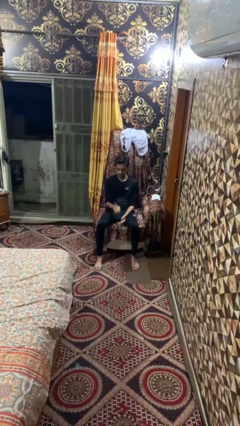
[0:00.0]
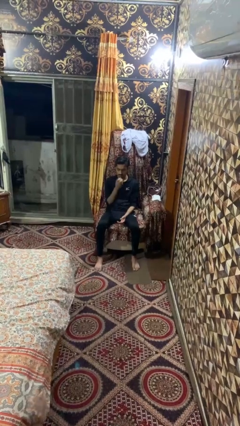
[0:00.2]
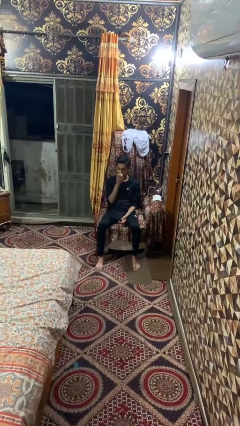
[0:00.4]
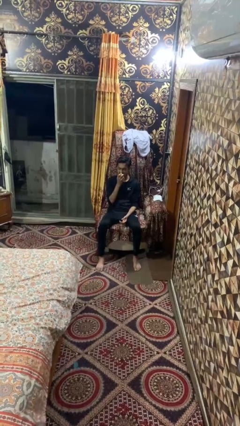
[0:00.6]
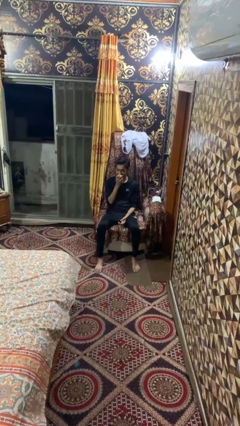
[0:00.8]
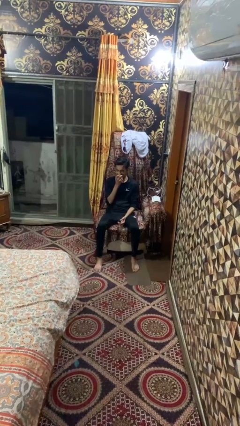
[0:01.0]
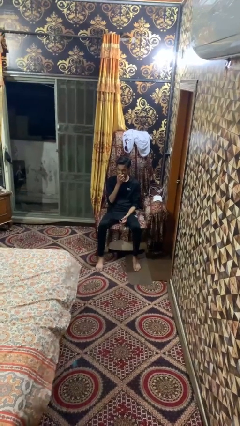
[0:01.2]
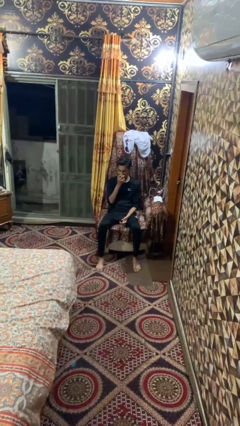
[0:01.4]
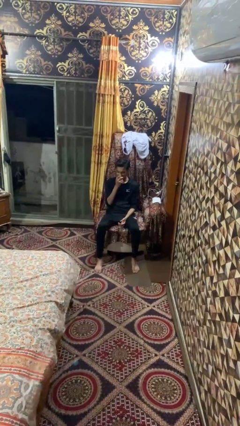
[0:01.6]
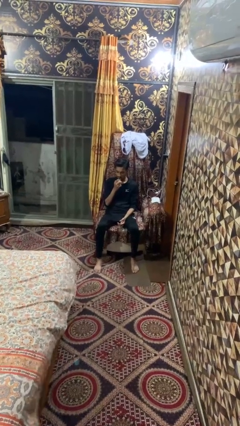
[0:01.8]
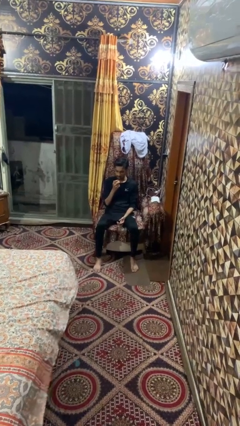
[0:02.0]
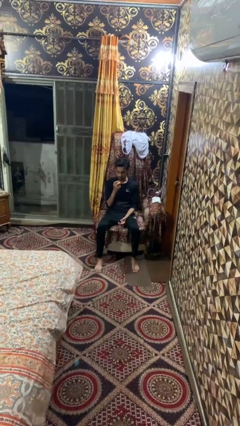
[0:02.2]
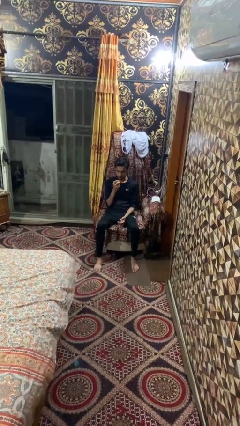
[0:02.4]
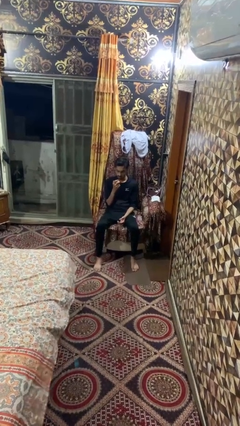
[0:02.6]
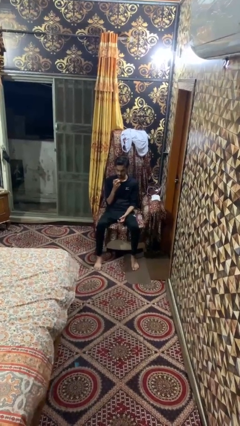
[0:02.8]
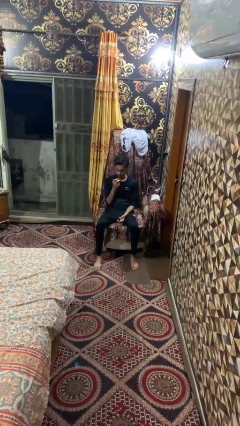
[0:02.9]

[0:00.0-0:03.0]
person eats apple

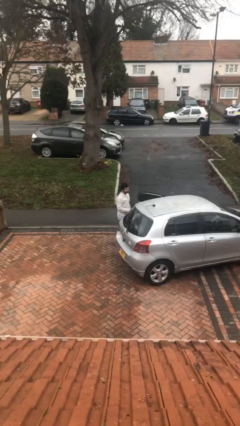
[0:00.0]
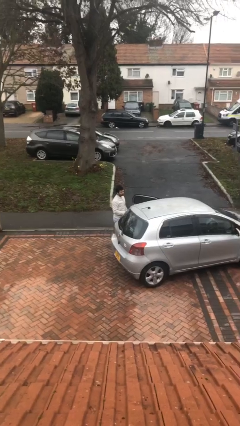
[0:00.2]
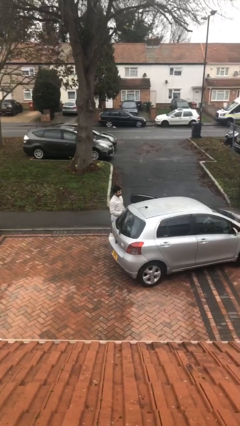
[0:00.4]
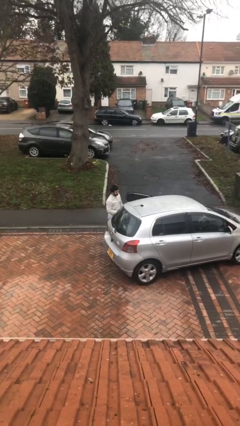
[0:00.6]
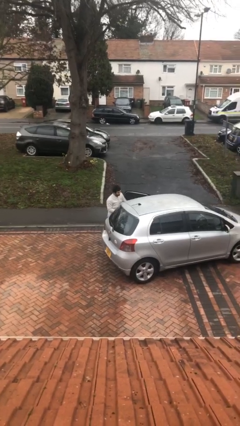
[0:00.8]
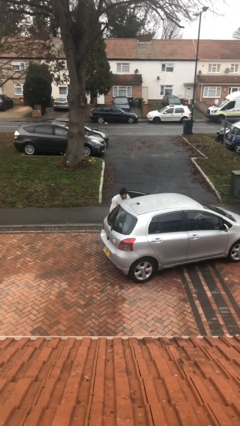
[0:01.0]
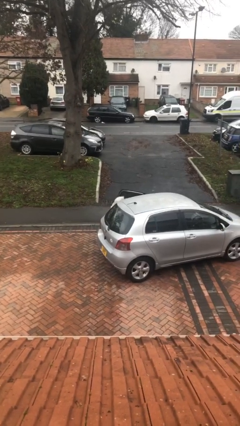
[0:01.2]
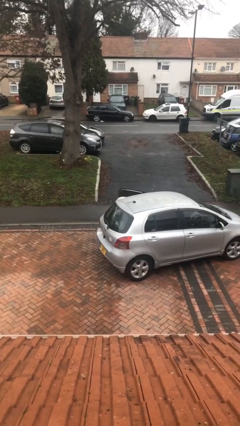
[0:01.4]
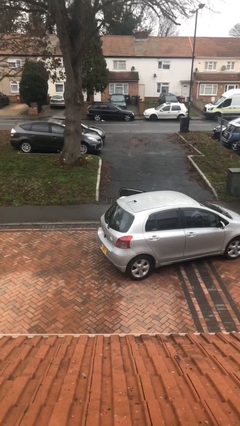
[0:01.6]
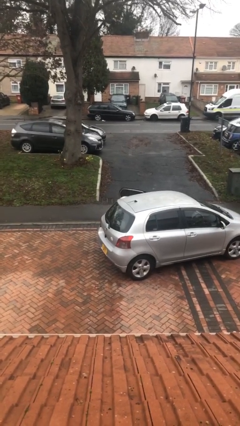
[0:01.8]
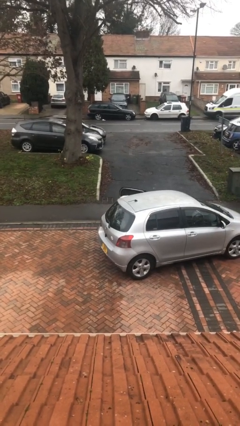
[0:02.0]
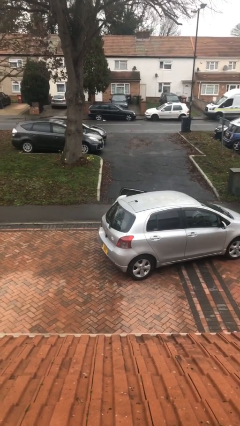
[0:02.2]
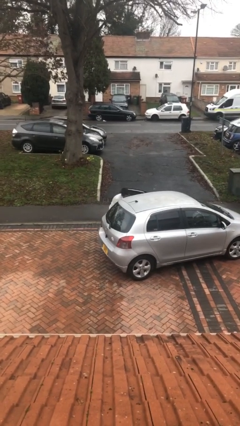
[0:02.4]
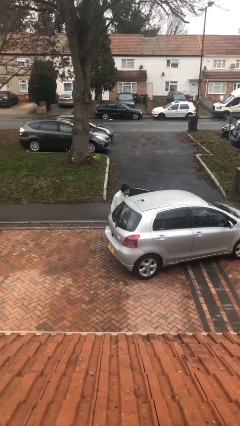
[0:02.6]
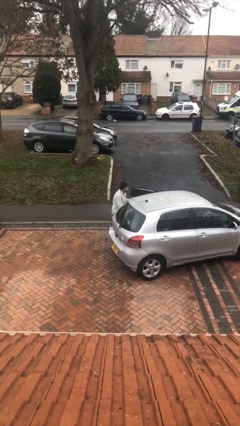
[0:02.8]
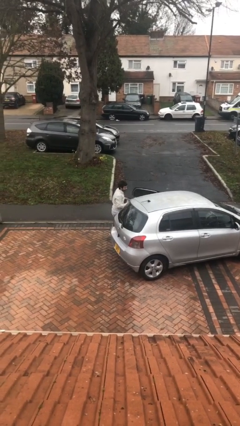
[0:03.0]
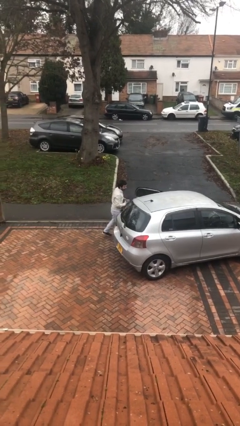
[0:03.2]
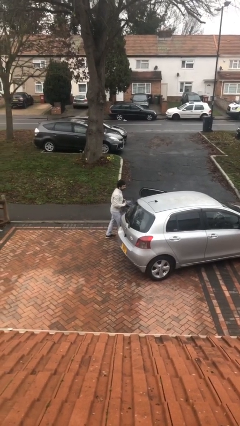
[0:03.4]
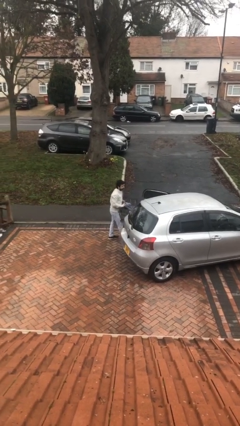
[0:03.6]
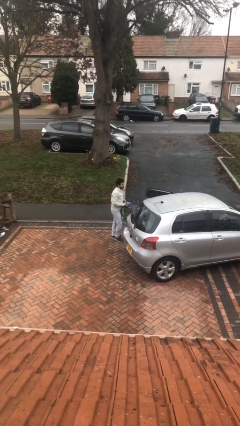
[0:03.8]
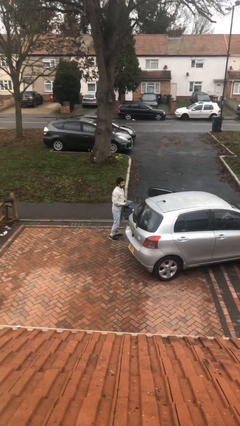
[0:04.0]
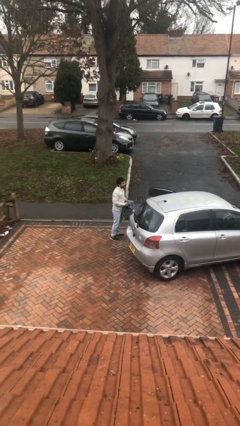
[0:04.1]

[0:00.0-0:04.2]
person unloads car

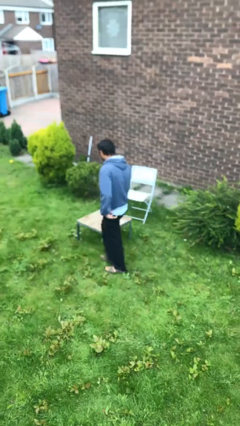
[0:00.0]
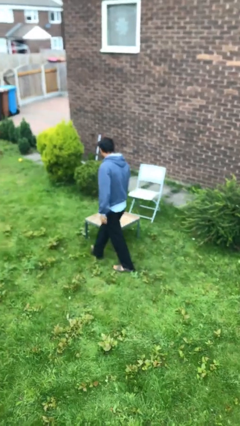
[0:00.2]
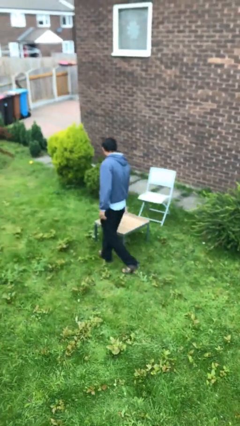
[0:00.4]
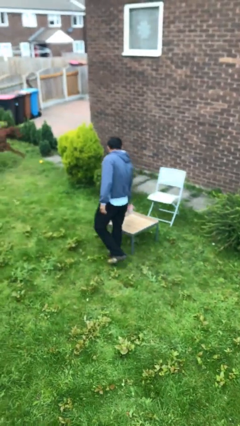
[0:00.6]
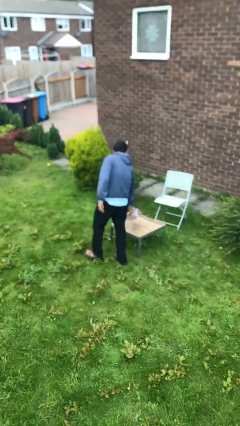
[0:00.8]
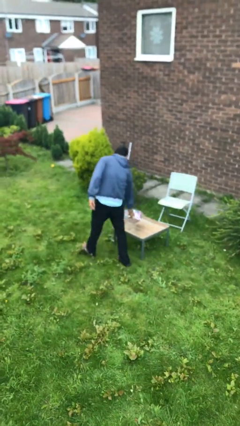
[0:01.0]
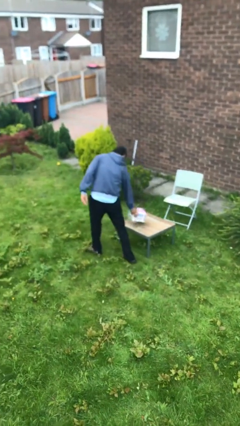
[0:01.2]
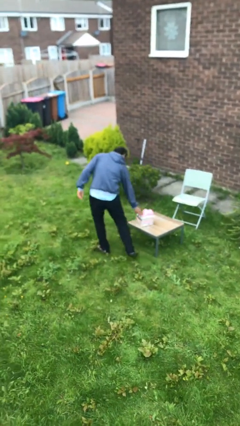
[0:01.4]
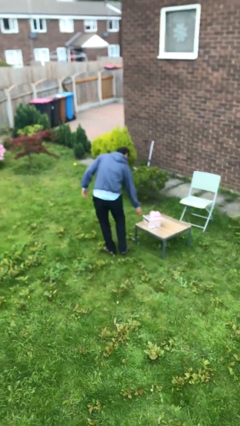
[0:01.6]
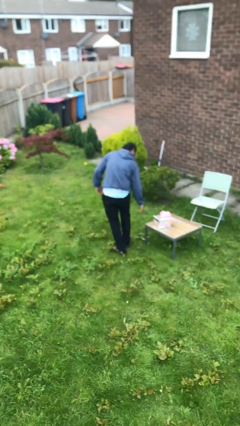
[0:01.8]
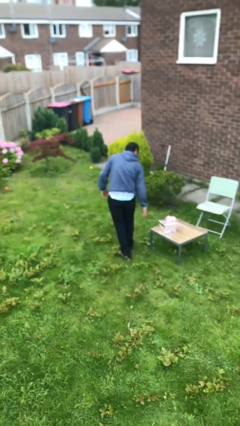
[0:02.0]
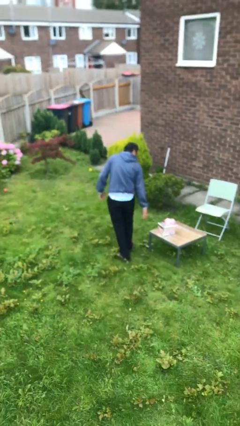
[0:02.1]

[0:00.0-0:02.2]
person puts down object on table

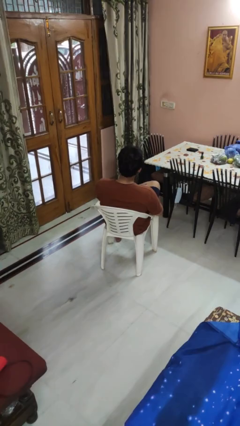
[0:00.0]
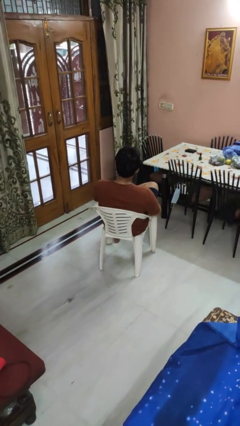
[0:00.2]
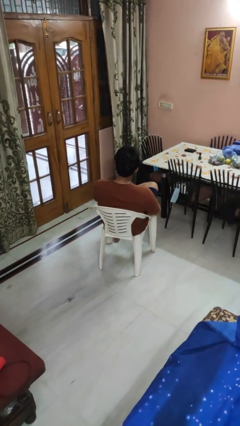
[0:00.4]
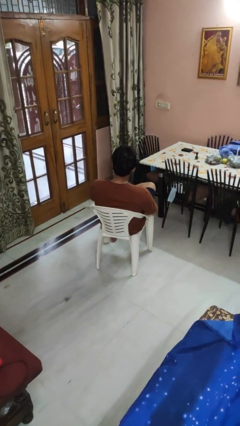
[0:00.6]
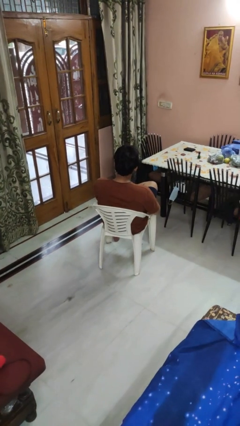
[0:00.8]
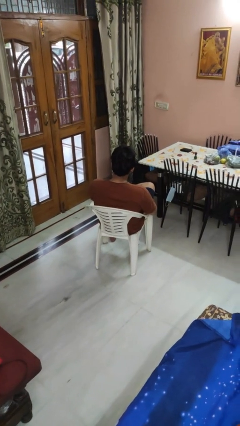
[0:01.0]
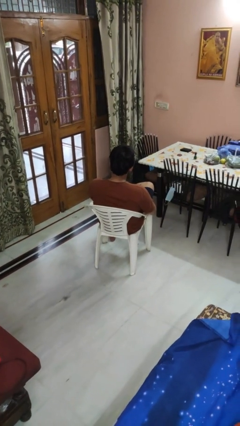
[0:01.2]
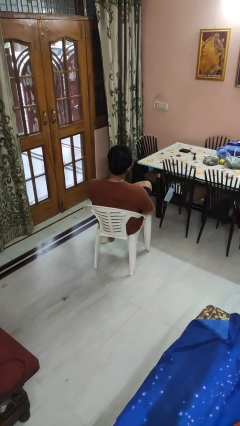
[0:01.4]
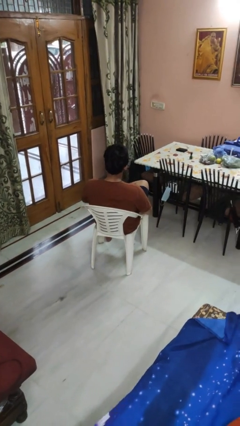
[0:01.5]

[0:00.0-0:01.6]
person rubs foot

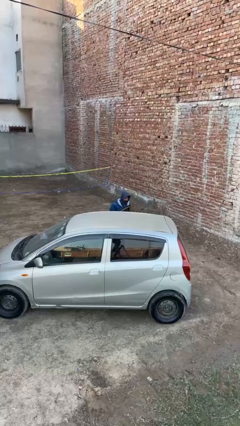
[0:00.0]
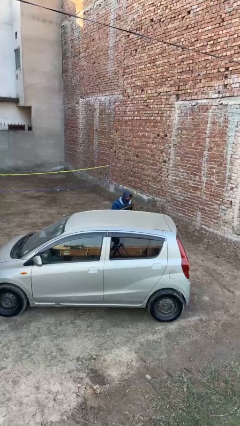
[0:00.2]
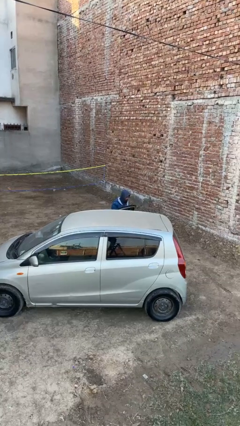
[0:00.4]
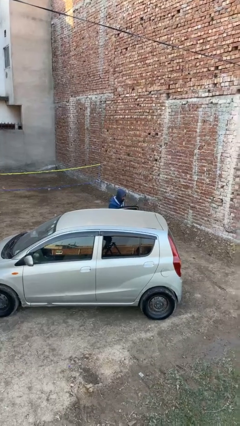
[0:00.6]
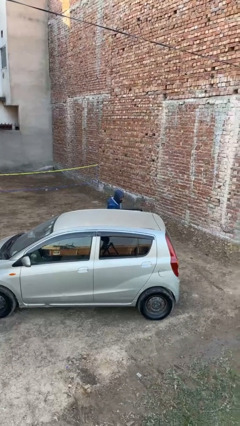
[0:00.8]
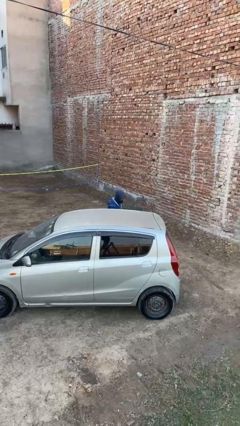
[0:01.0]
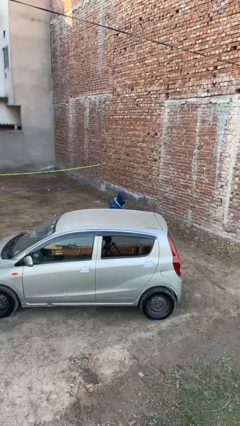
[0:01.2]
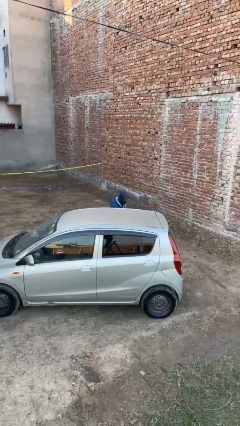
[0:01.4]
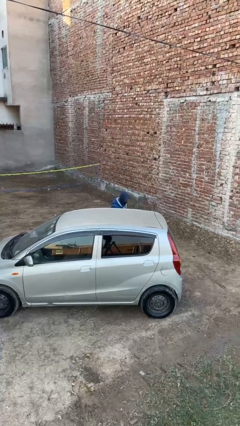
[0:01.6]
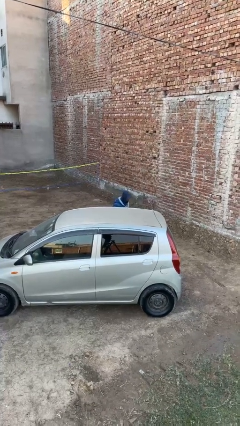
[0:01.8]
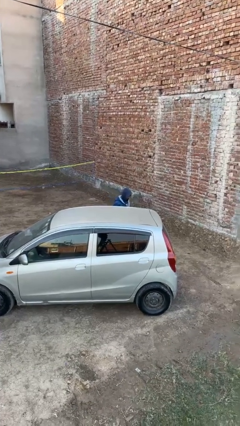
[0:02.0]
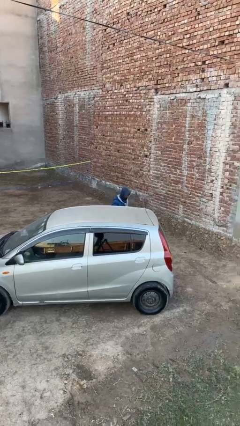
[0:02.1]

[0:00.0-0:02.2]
person closes car door

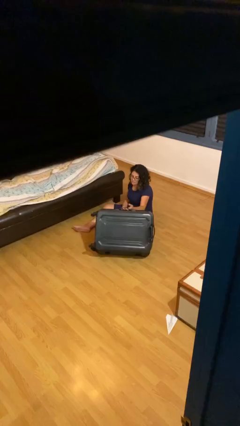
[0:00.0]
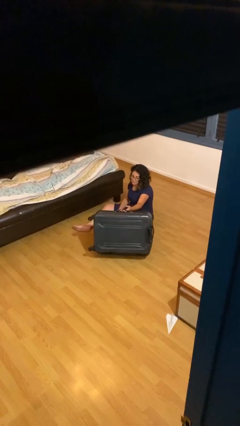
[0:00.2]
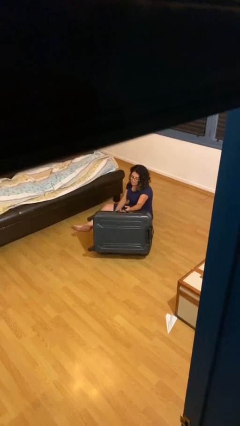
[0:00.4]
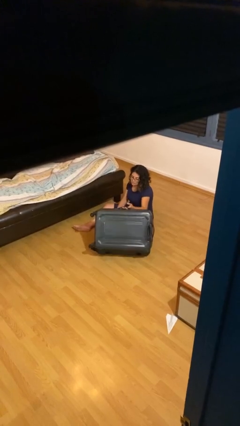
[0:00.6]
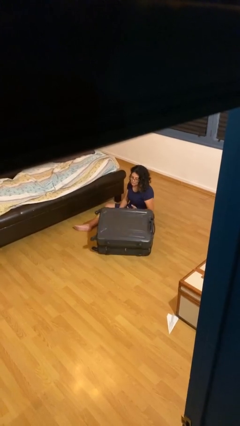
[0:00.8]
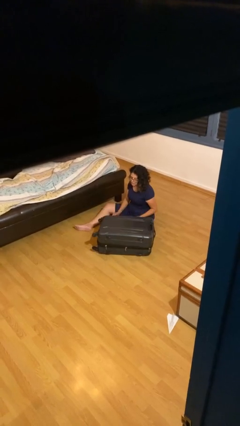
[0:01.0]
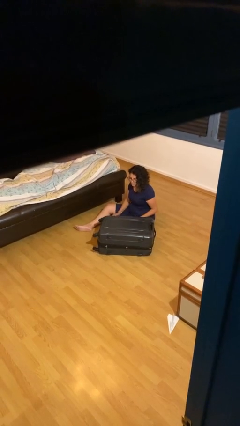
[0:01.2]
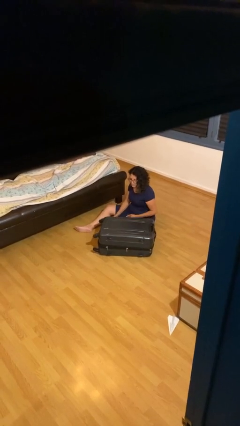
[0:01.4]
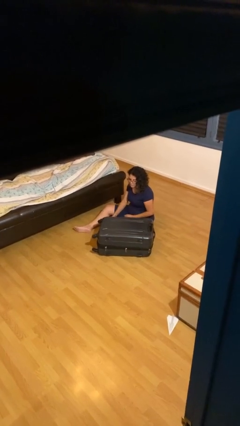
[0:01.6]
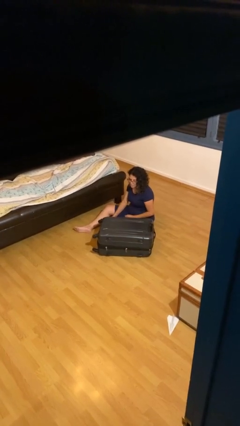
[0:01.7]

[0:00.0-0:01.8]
person closes suitcase

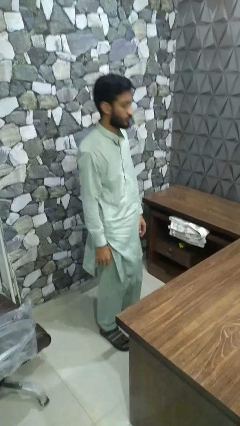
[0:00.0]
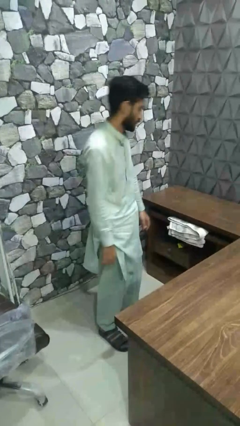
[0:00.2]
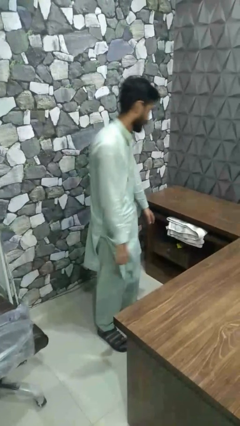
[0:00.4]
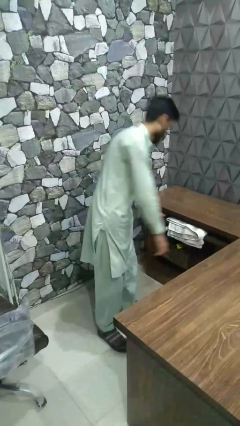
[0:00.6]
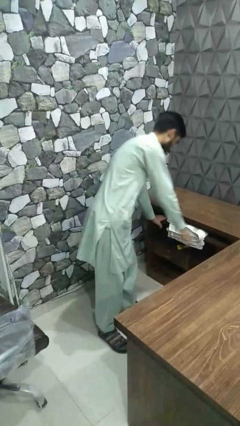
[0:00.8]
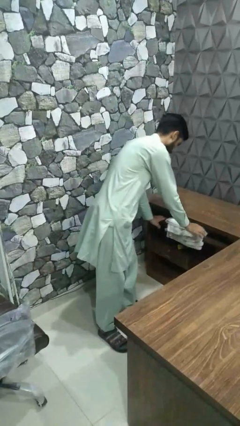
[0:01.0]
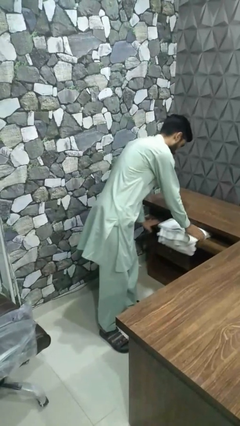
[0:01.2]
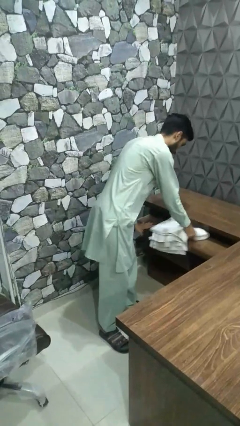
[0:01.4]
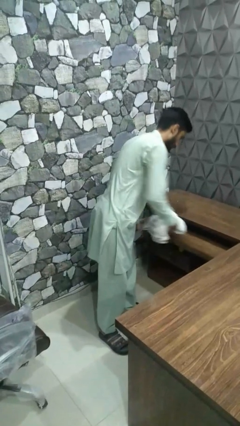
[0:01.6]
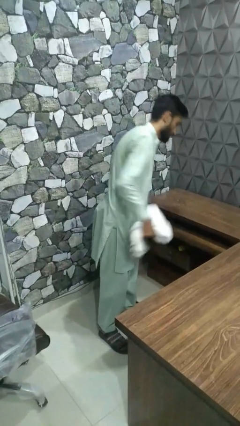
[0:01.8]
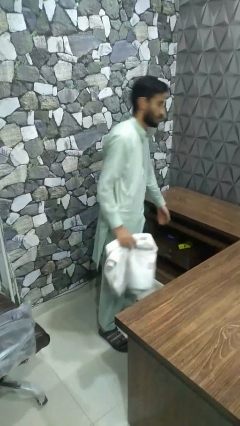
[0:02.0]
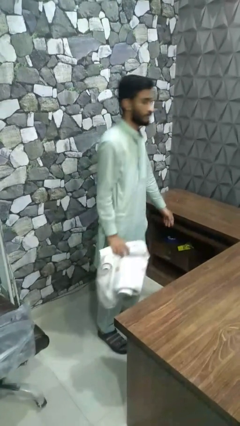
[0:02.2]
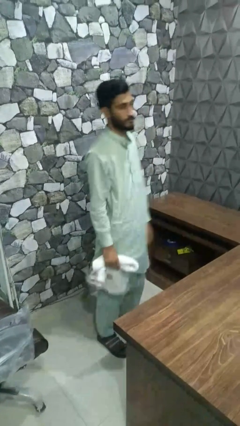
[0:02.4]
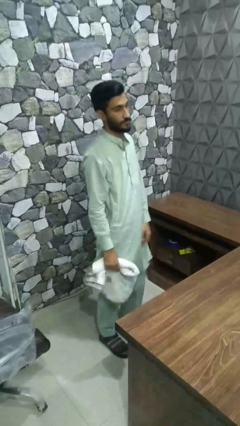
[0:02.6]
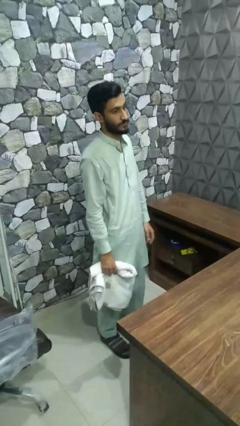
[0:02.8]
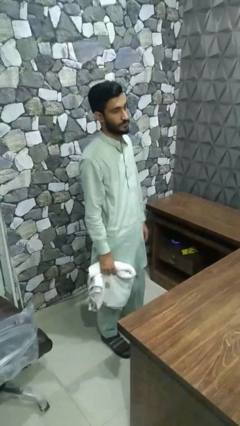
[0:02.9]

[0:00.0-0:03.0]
person takes clothes from dresser
